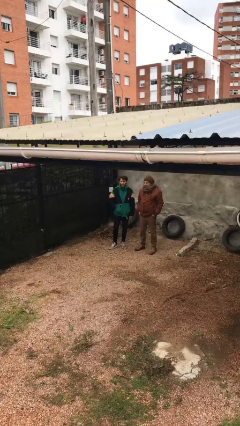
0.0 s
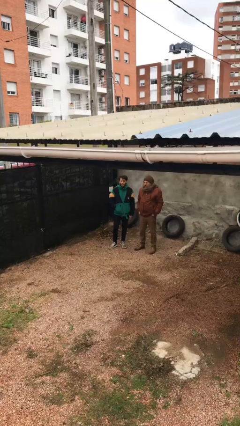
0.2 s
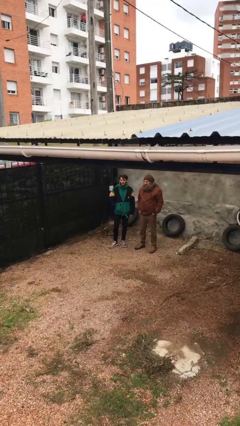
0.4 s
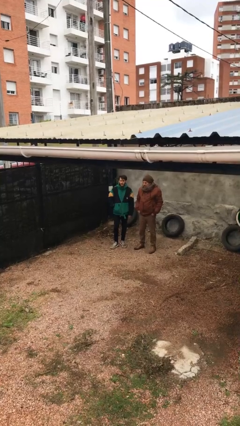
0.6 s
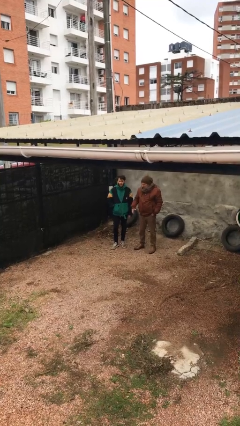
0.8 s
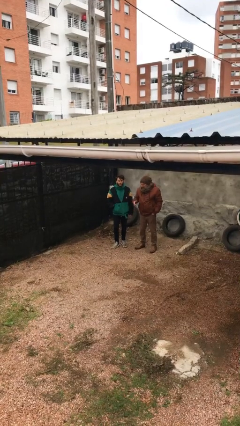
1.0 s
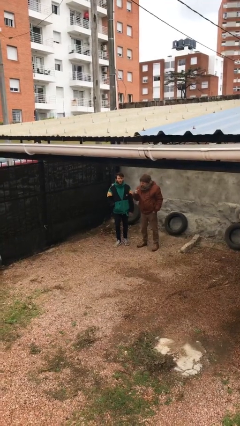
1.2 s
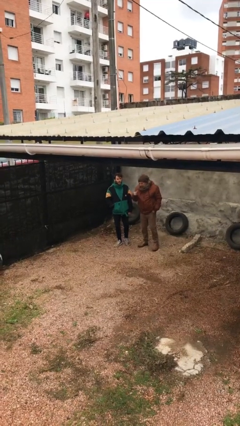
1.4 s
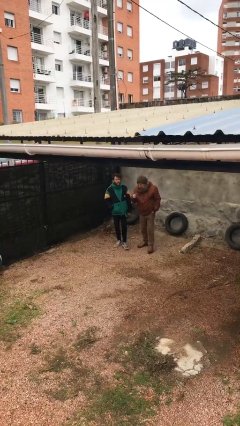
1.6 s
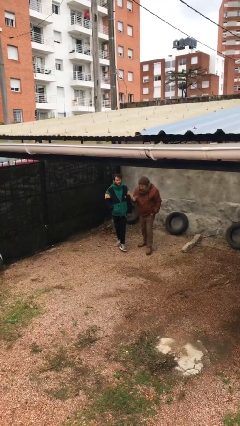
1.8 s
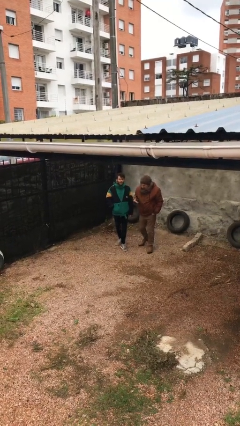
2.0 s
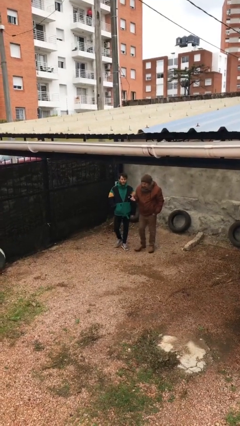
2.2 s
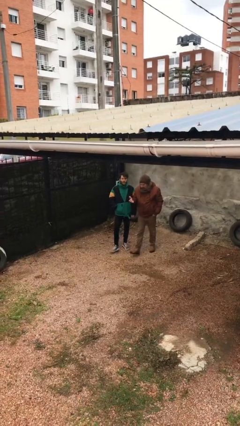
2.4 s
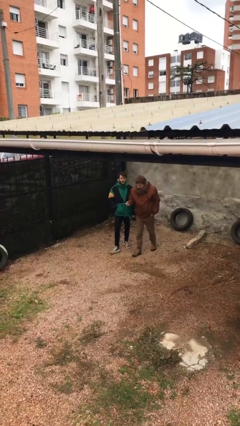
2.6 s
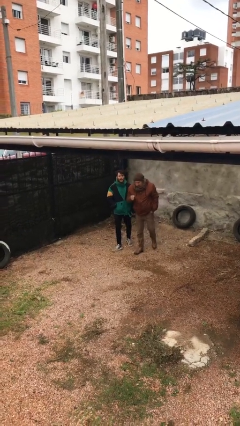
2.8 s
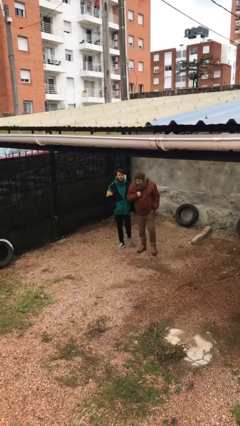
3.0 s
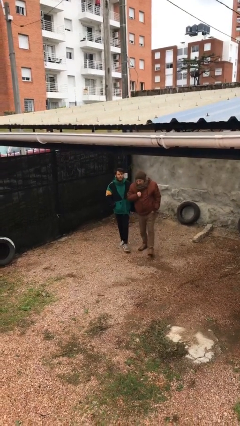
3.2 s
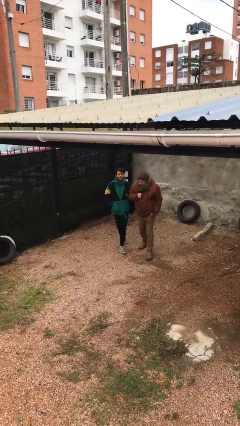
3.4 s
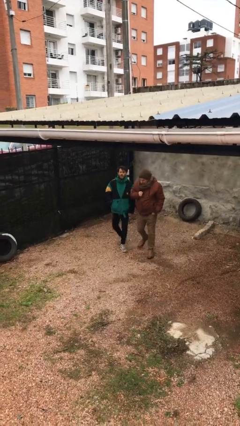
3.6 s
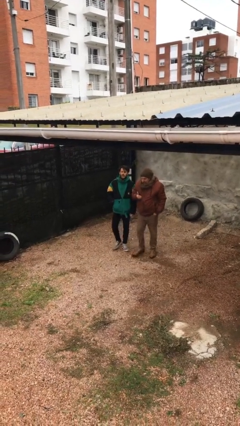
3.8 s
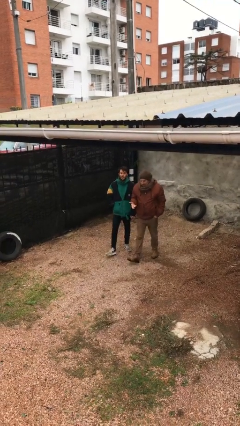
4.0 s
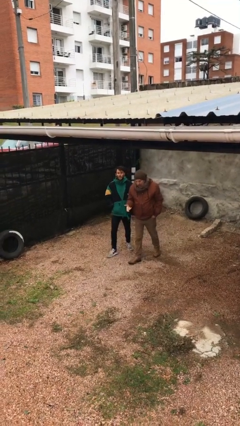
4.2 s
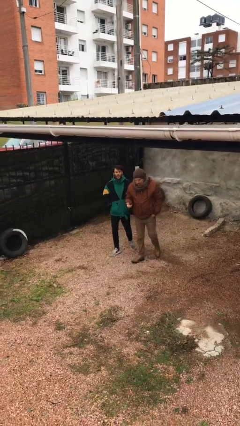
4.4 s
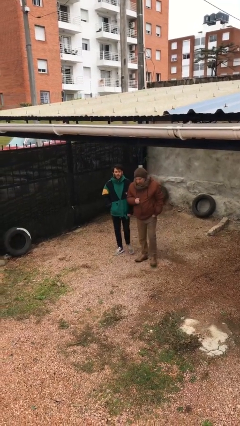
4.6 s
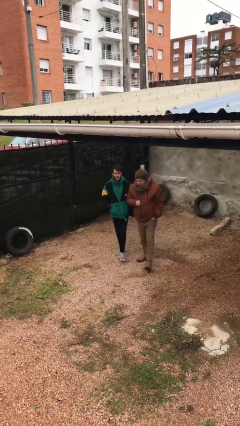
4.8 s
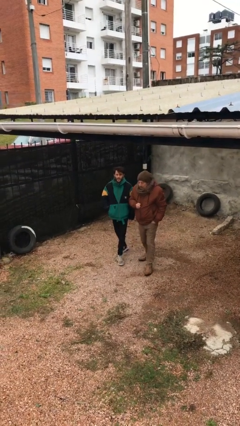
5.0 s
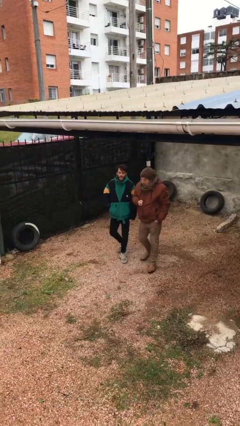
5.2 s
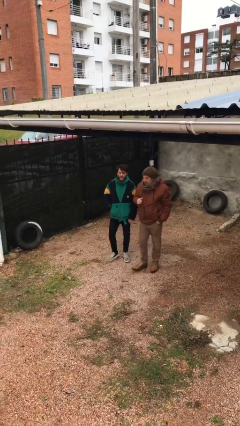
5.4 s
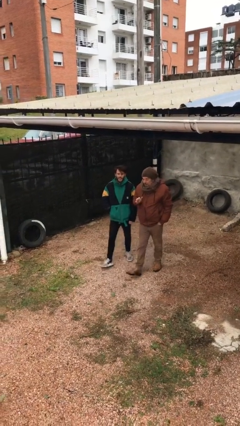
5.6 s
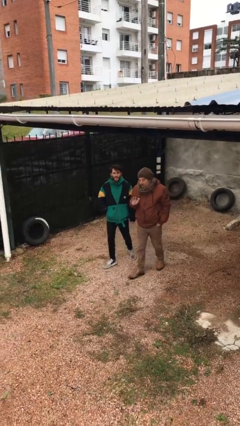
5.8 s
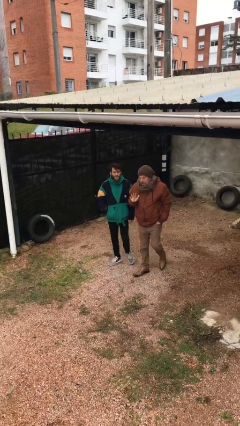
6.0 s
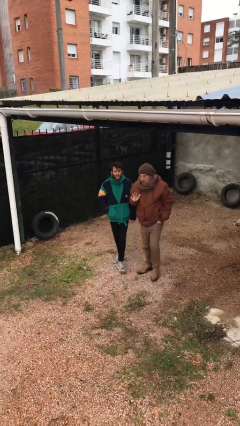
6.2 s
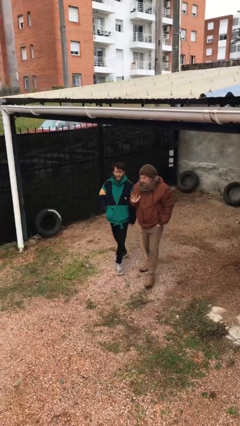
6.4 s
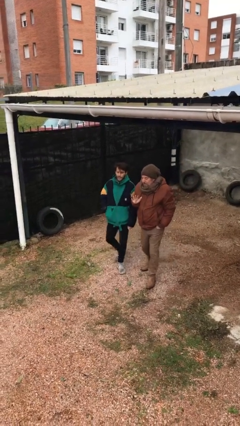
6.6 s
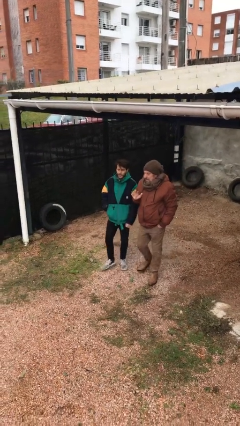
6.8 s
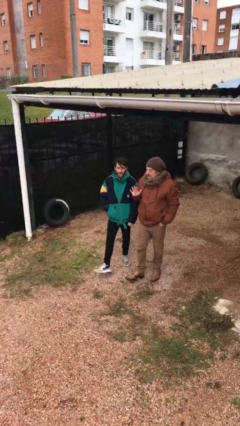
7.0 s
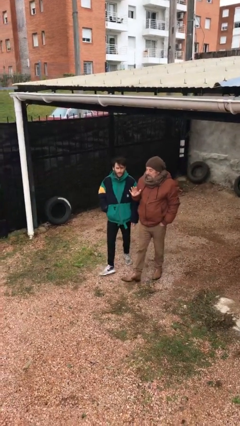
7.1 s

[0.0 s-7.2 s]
person talks to person

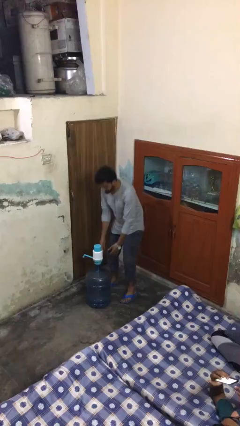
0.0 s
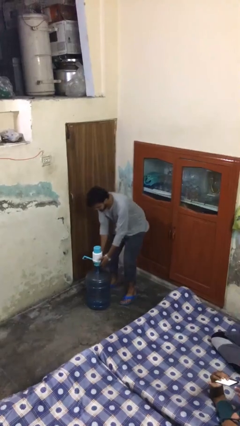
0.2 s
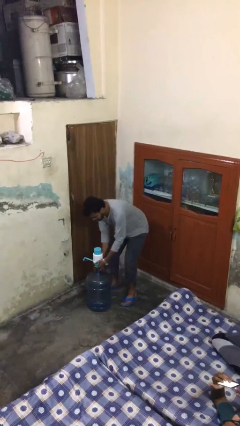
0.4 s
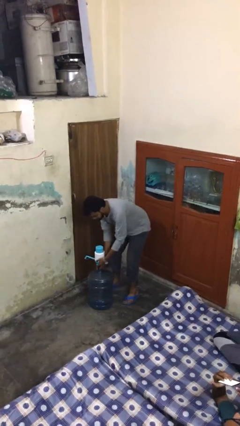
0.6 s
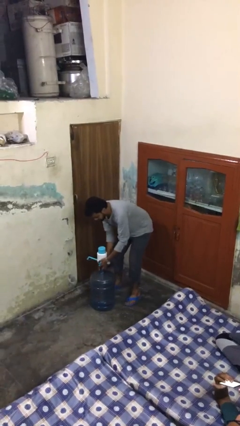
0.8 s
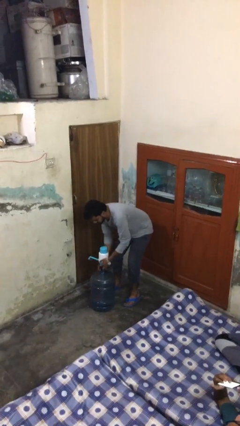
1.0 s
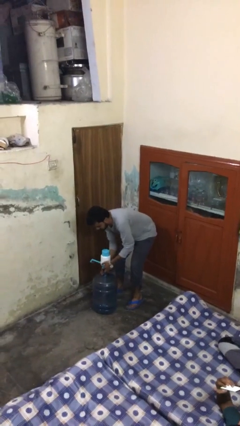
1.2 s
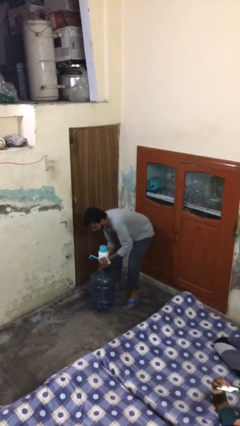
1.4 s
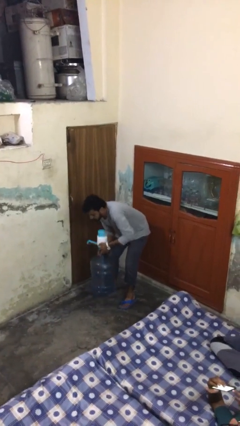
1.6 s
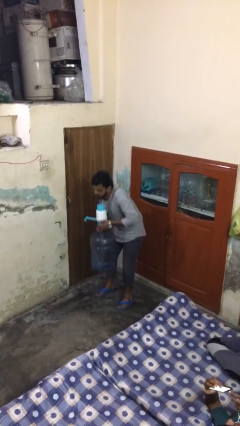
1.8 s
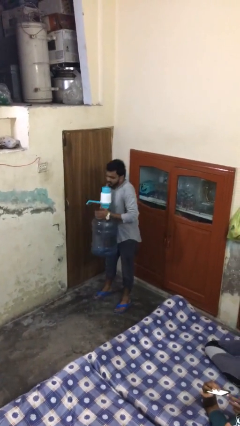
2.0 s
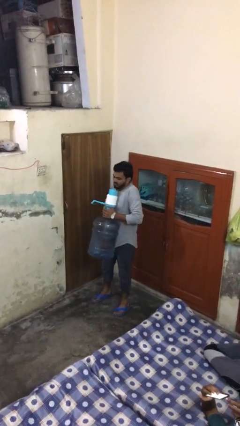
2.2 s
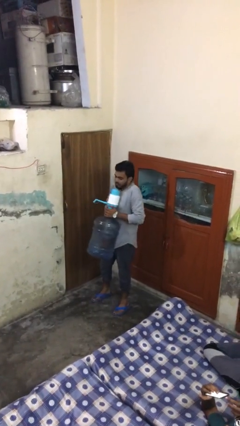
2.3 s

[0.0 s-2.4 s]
person picks up object from floor

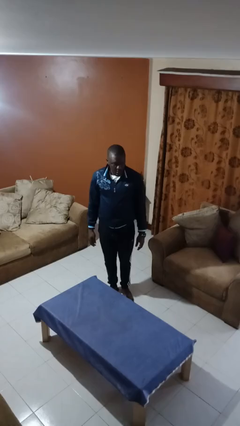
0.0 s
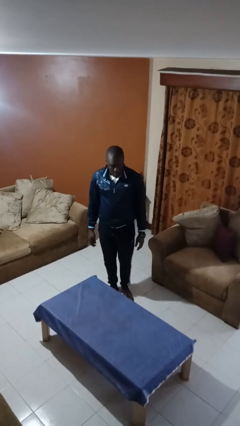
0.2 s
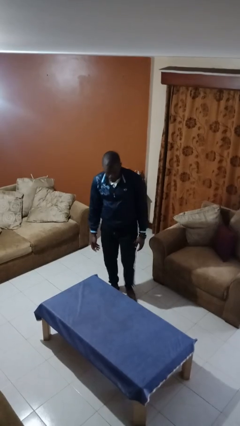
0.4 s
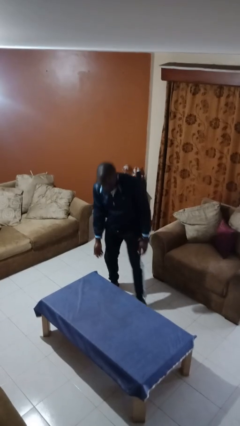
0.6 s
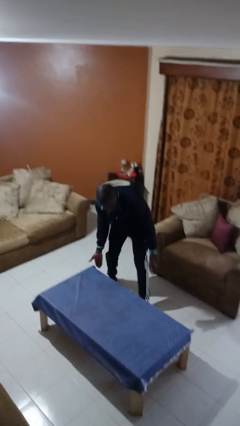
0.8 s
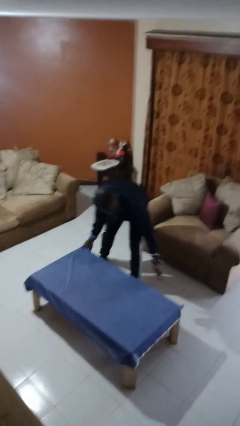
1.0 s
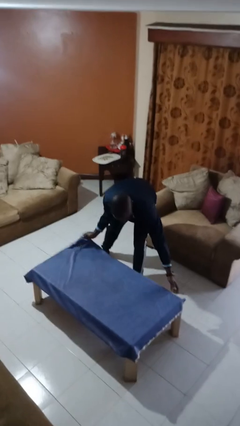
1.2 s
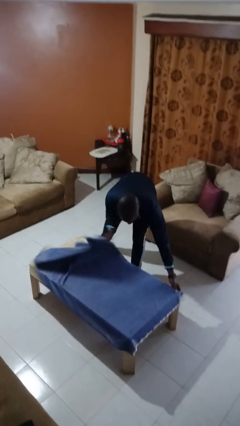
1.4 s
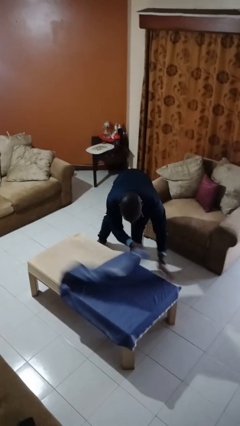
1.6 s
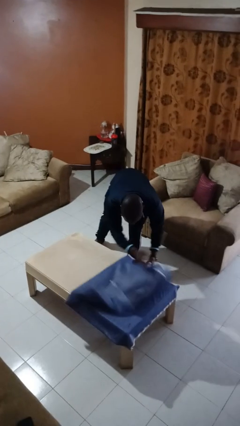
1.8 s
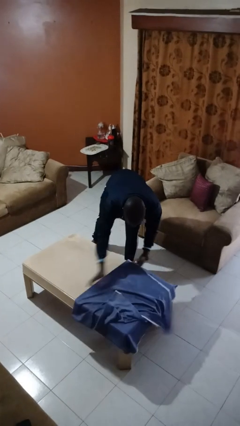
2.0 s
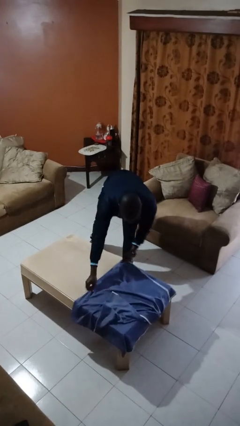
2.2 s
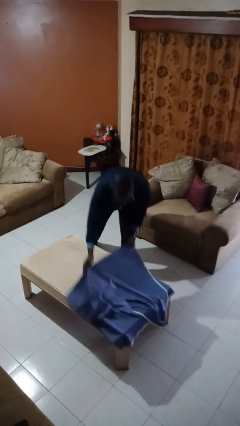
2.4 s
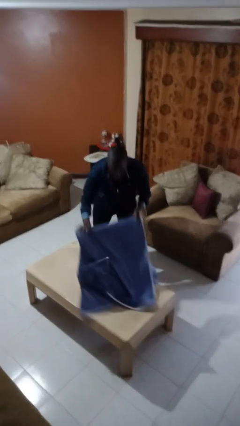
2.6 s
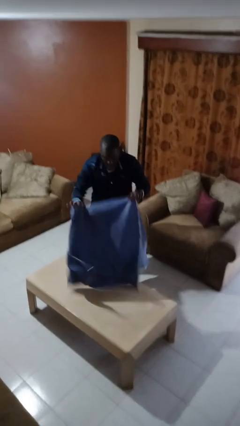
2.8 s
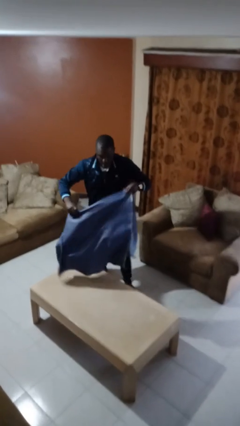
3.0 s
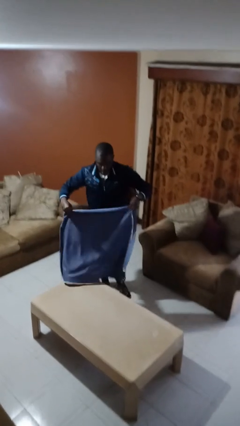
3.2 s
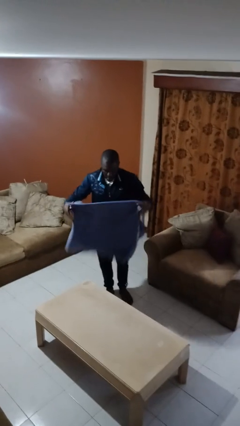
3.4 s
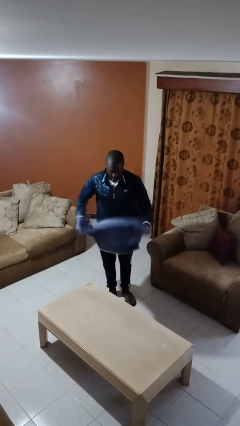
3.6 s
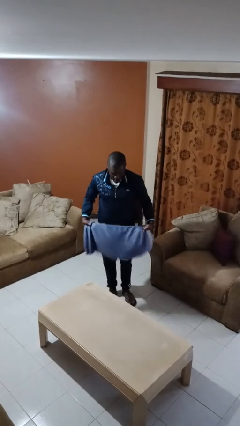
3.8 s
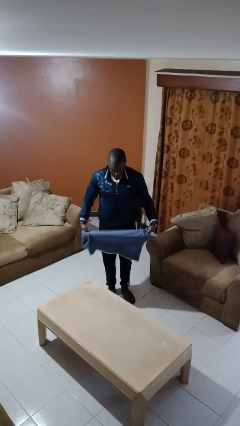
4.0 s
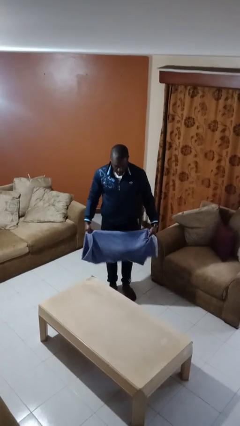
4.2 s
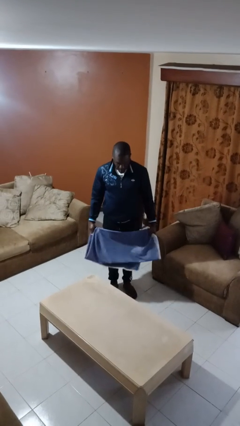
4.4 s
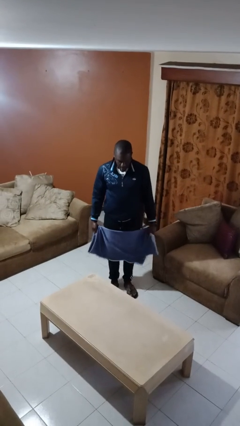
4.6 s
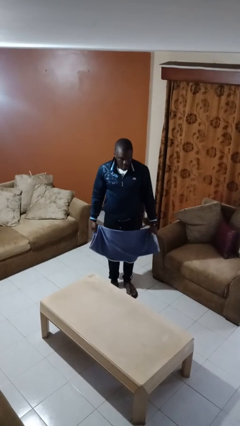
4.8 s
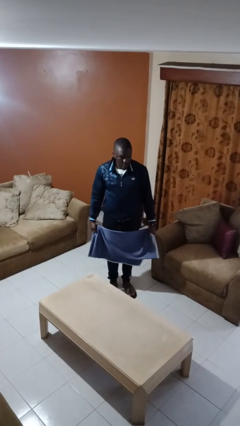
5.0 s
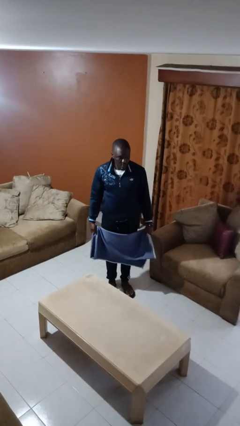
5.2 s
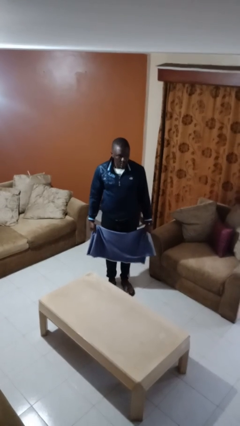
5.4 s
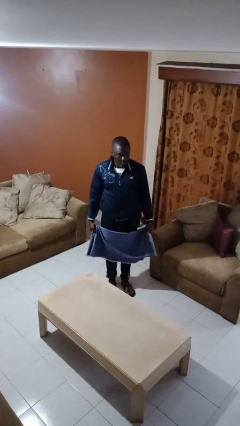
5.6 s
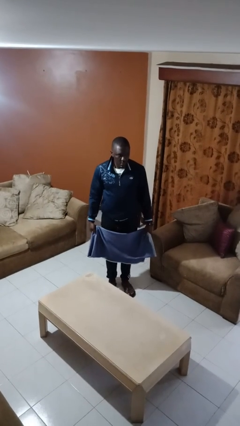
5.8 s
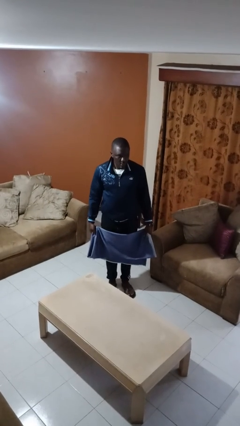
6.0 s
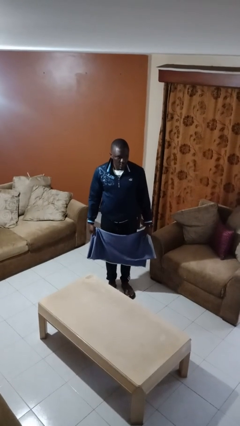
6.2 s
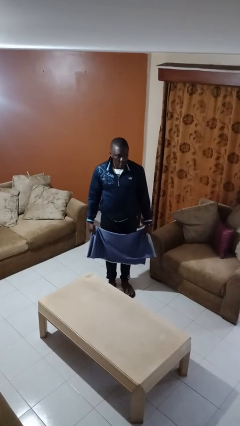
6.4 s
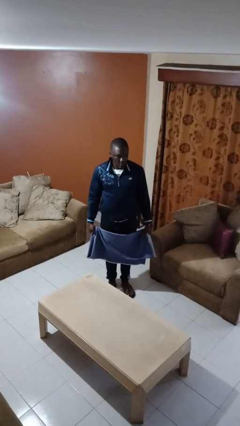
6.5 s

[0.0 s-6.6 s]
person folds tablecloth

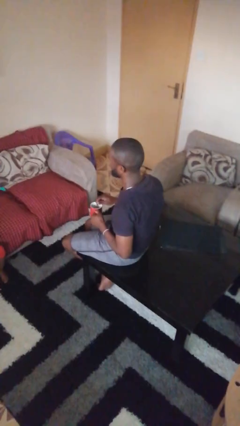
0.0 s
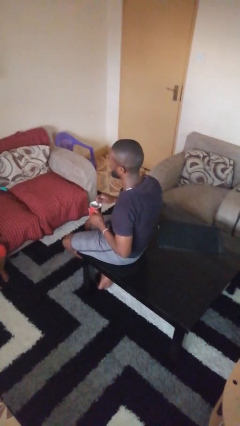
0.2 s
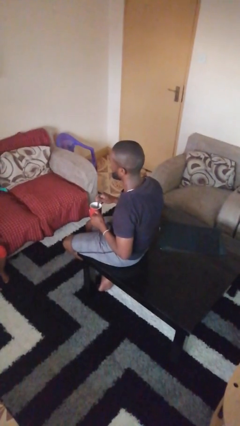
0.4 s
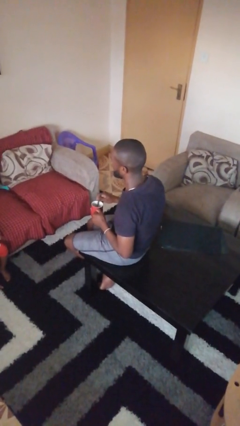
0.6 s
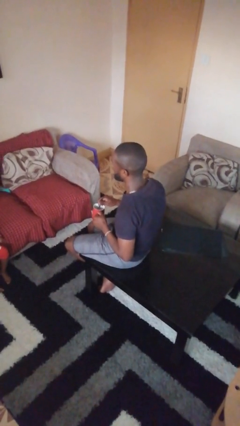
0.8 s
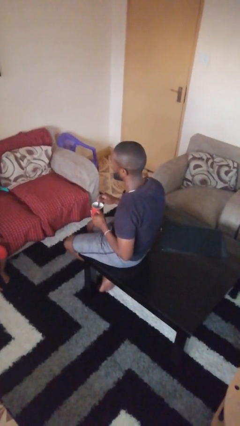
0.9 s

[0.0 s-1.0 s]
person stirs mug

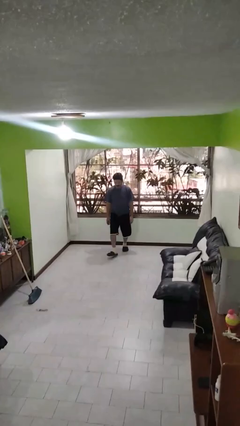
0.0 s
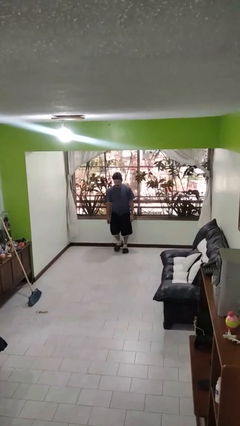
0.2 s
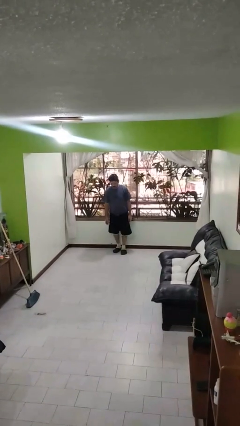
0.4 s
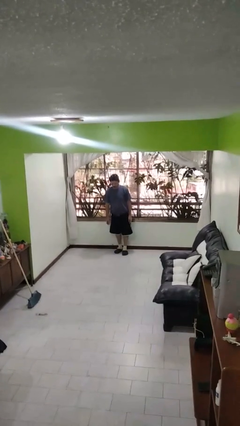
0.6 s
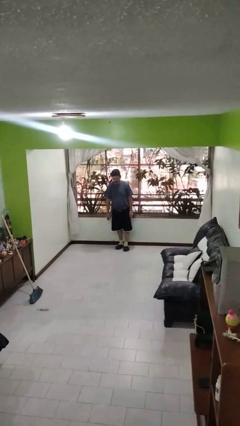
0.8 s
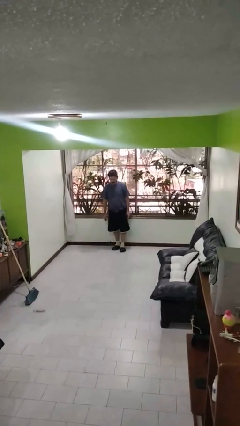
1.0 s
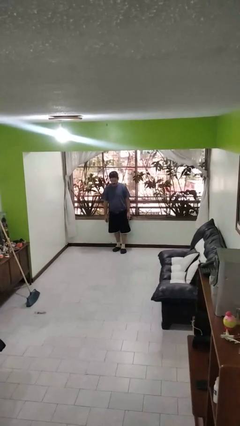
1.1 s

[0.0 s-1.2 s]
person stands up from floor
